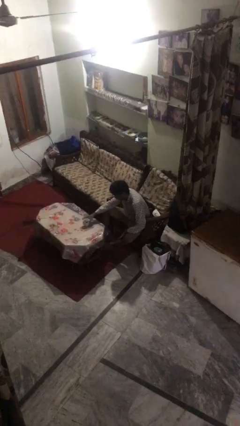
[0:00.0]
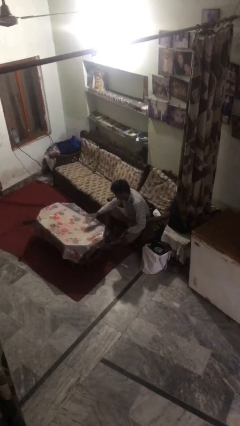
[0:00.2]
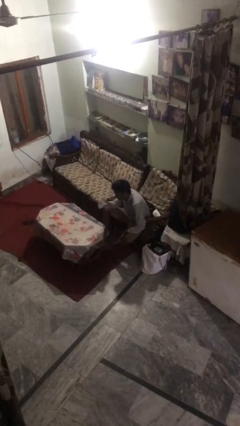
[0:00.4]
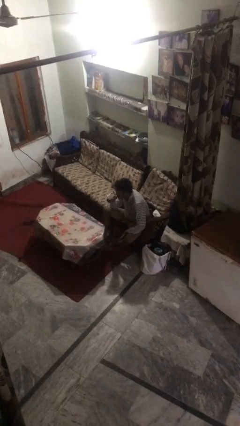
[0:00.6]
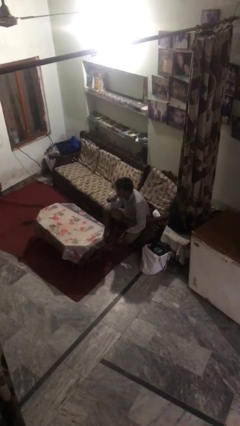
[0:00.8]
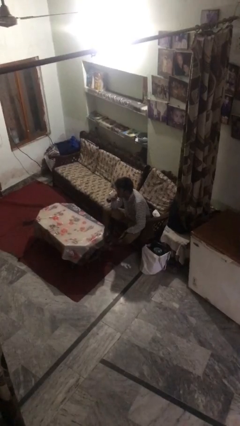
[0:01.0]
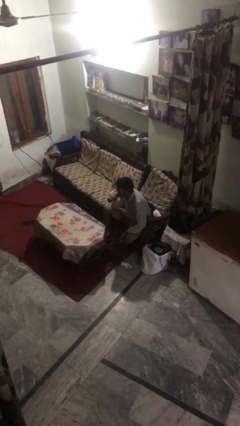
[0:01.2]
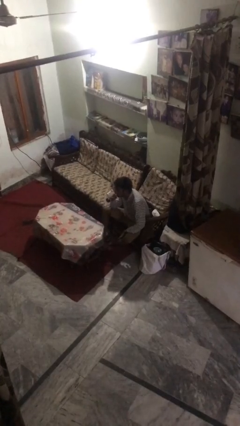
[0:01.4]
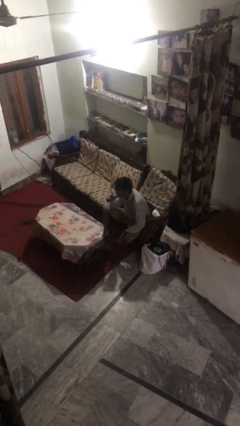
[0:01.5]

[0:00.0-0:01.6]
person drinks from mug

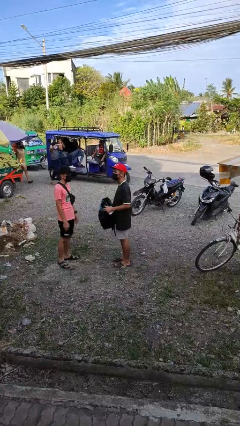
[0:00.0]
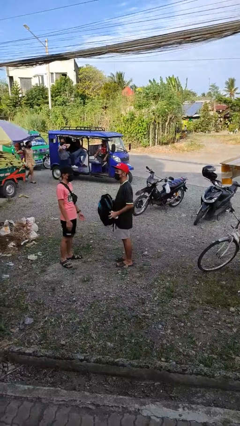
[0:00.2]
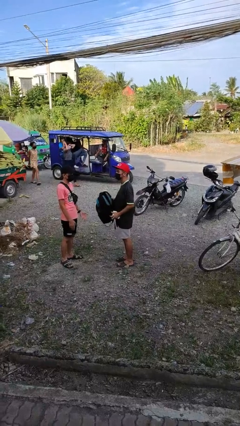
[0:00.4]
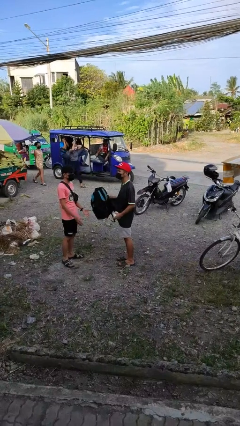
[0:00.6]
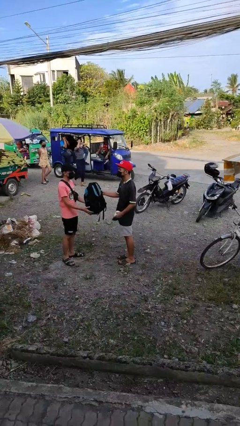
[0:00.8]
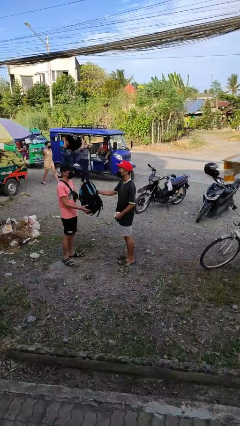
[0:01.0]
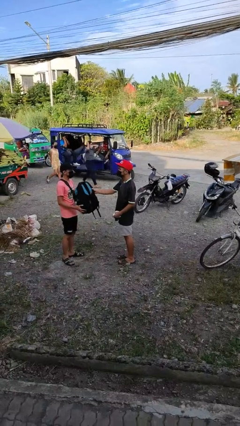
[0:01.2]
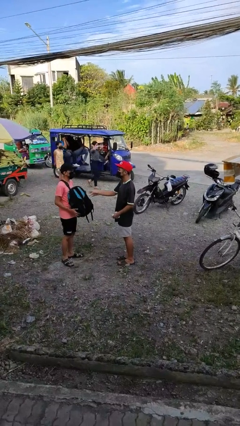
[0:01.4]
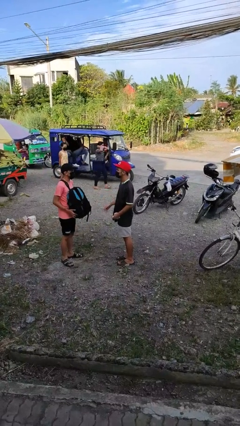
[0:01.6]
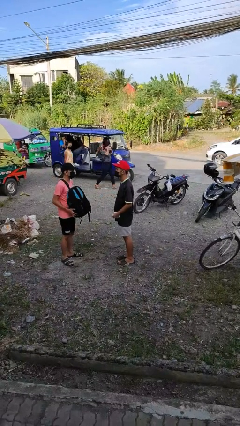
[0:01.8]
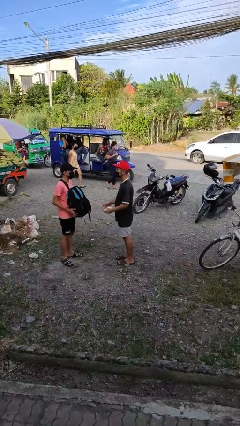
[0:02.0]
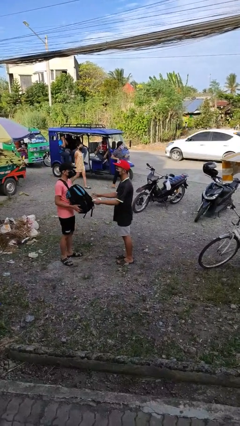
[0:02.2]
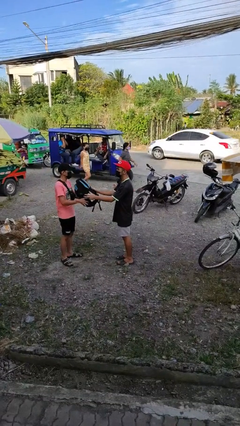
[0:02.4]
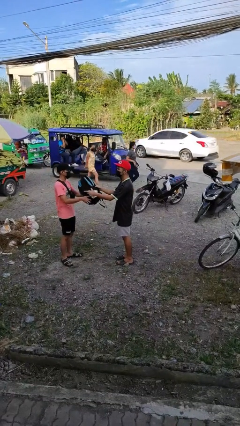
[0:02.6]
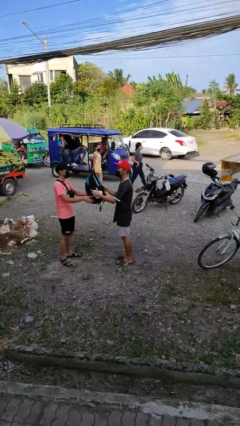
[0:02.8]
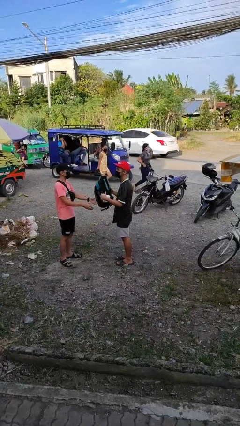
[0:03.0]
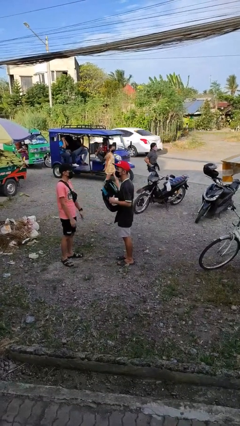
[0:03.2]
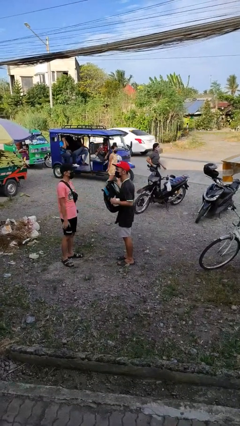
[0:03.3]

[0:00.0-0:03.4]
person transfers object to person

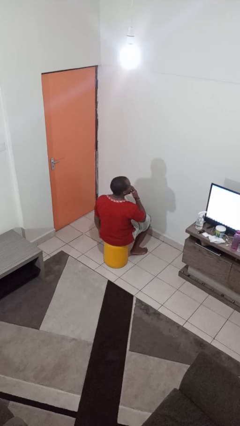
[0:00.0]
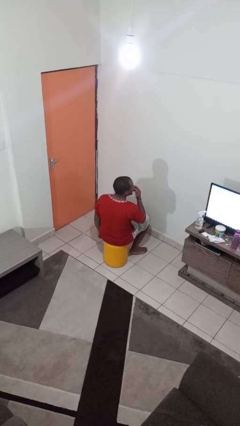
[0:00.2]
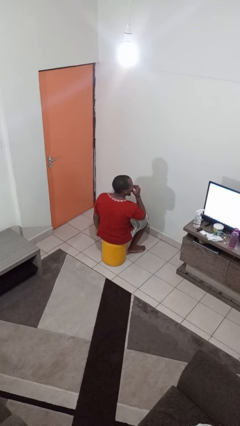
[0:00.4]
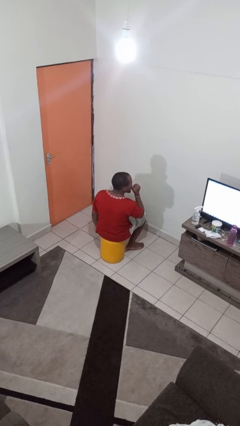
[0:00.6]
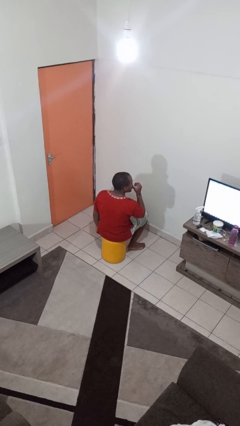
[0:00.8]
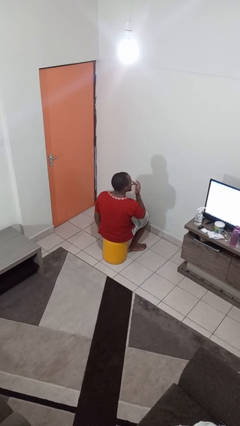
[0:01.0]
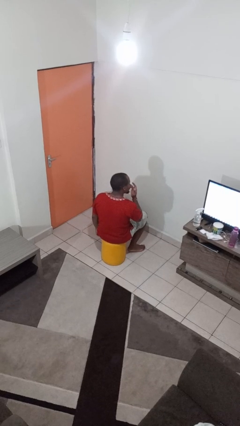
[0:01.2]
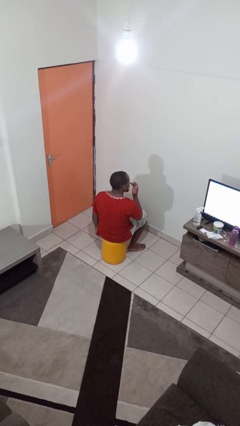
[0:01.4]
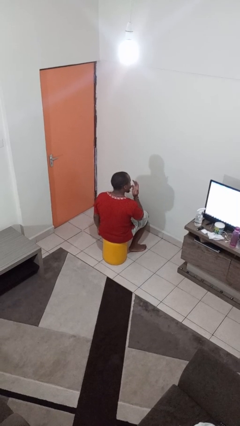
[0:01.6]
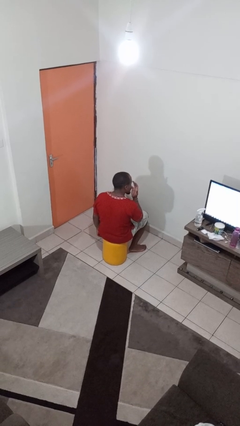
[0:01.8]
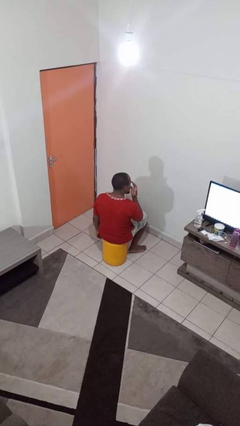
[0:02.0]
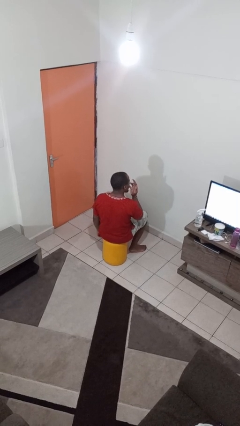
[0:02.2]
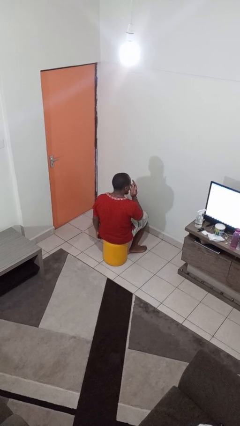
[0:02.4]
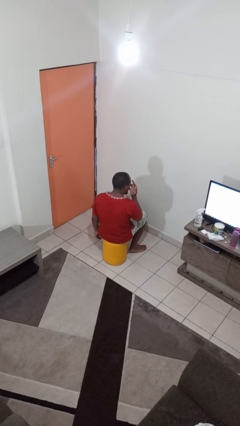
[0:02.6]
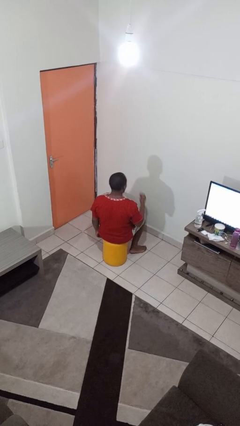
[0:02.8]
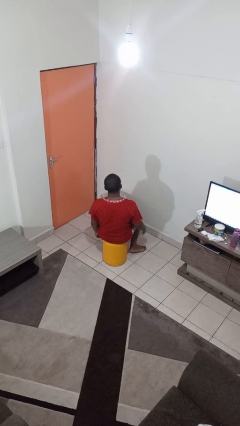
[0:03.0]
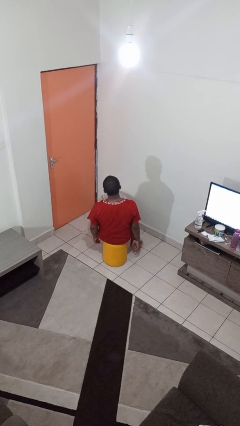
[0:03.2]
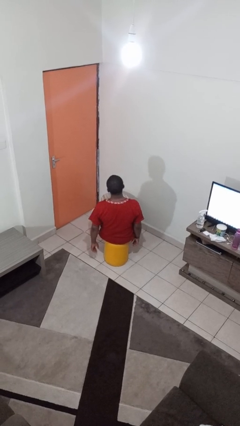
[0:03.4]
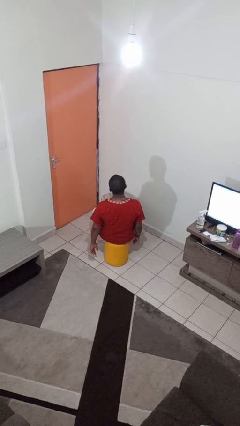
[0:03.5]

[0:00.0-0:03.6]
person licks fingers

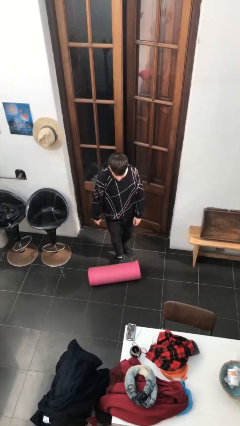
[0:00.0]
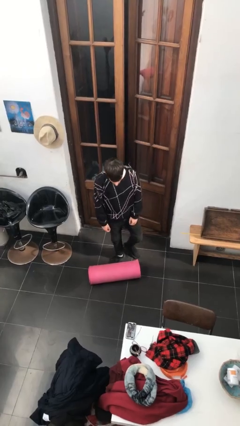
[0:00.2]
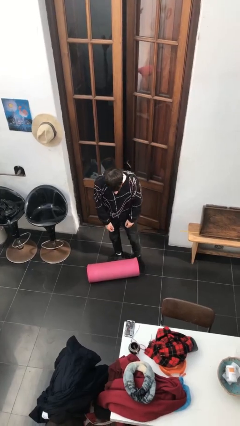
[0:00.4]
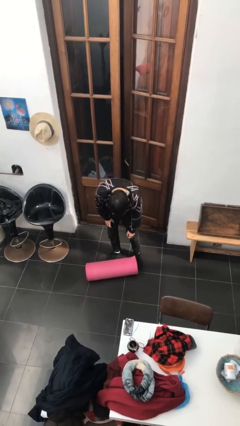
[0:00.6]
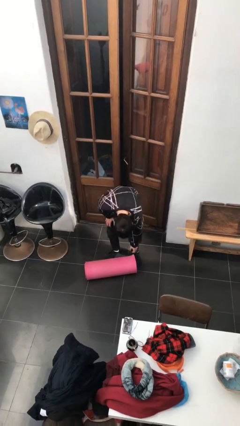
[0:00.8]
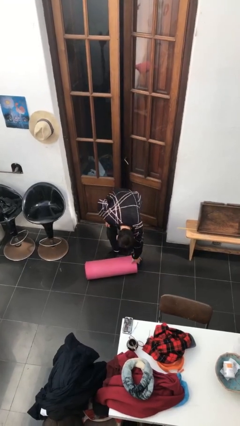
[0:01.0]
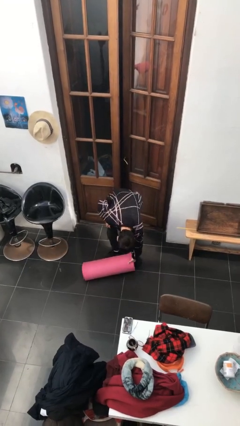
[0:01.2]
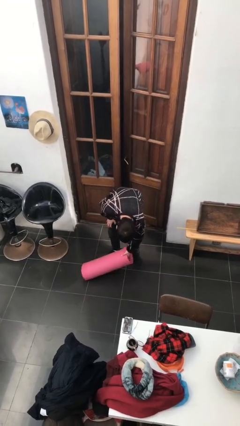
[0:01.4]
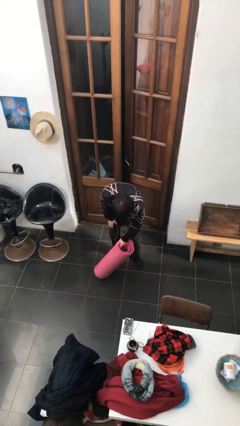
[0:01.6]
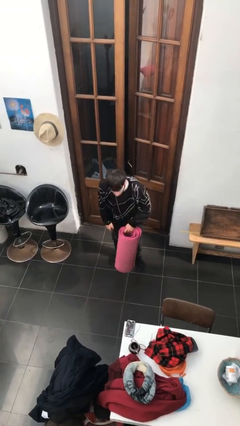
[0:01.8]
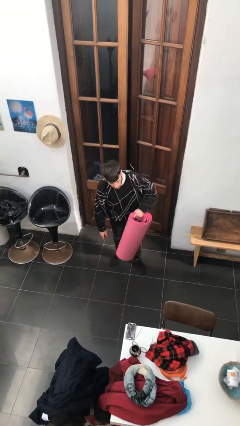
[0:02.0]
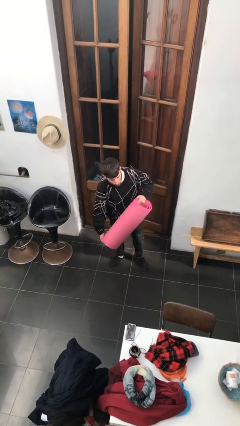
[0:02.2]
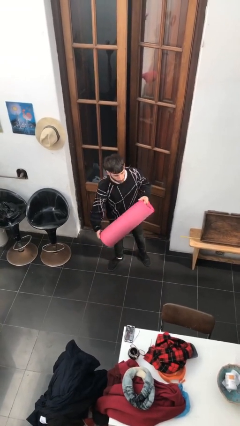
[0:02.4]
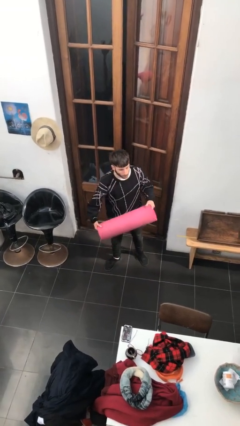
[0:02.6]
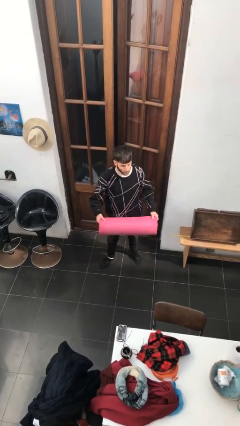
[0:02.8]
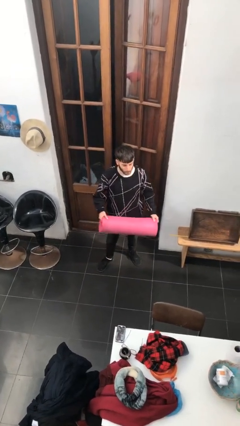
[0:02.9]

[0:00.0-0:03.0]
person picks up object from floor

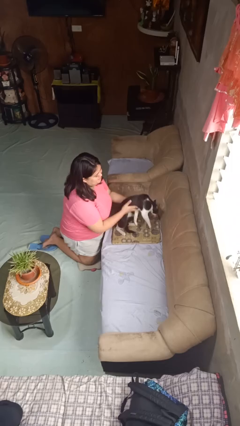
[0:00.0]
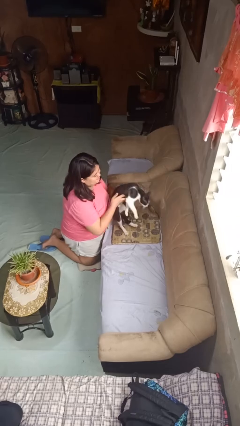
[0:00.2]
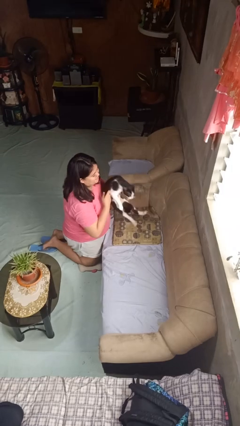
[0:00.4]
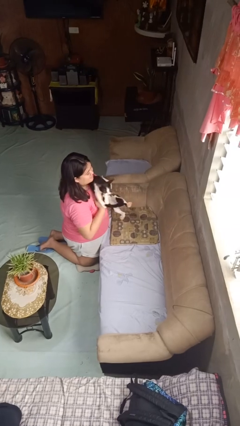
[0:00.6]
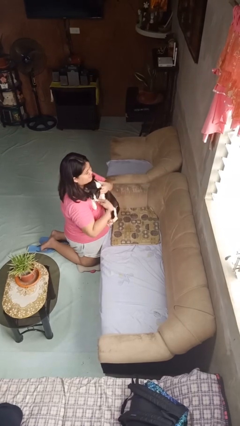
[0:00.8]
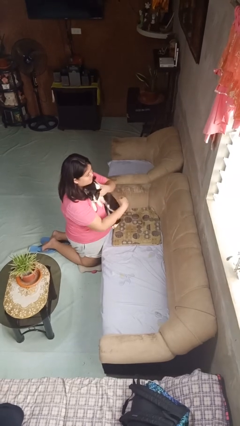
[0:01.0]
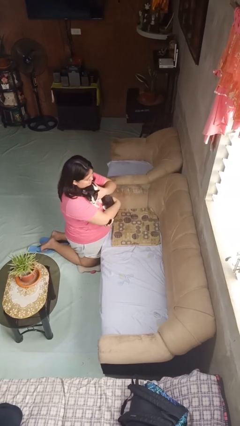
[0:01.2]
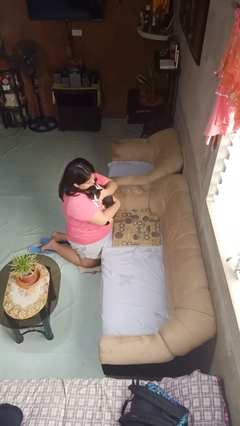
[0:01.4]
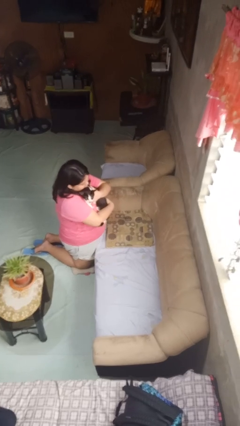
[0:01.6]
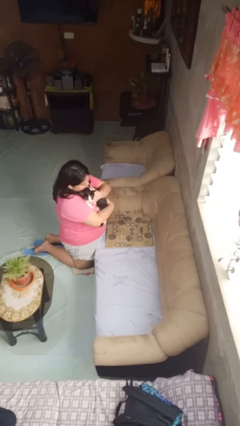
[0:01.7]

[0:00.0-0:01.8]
person hugs cat

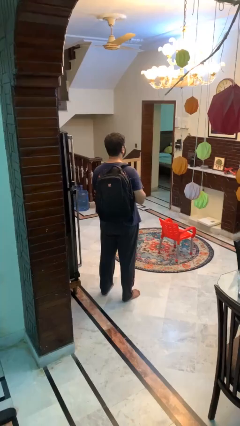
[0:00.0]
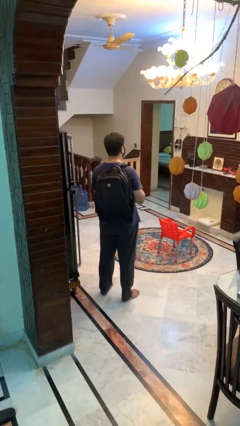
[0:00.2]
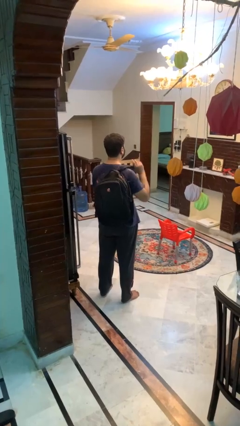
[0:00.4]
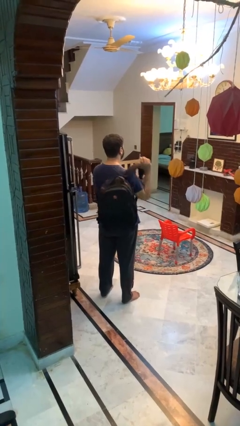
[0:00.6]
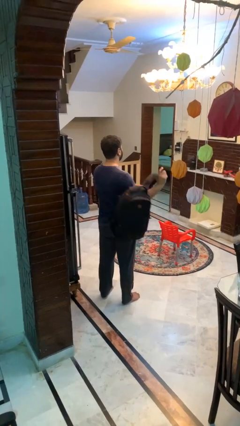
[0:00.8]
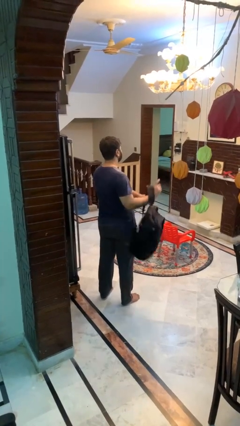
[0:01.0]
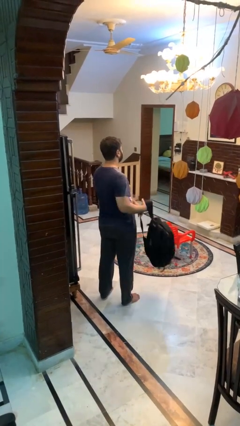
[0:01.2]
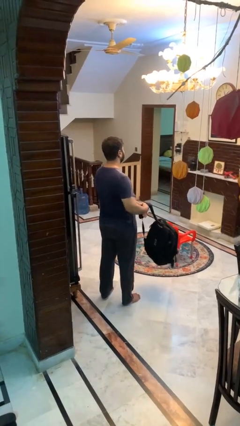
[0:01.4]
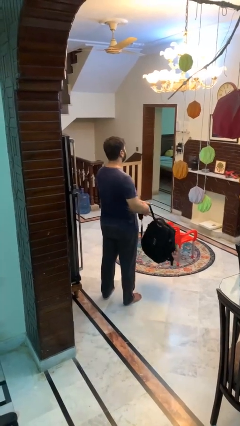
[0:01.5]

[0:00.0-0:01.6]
person takes off backpack

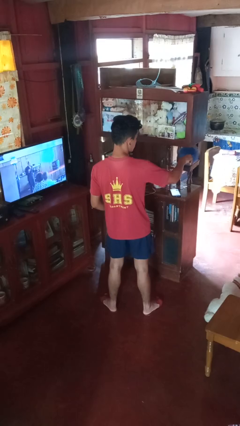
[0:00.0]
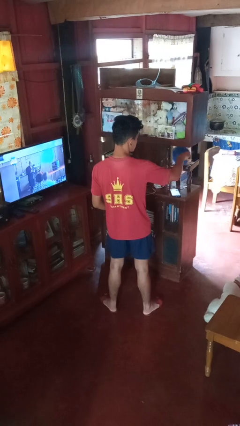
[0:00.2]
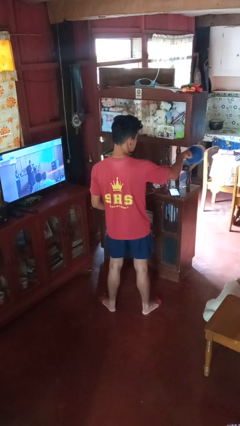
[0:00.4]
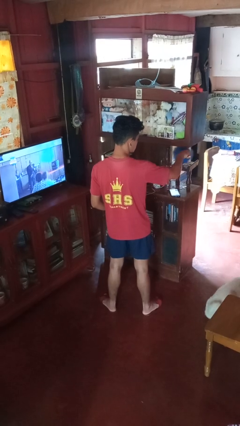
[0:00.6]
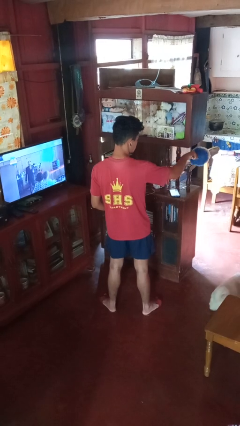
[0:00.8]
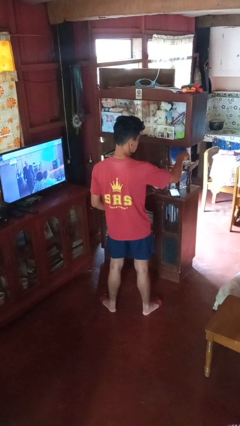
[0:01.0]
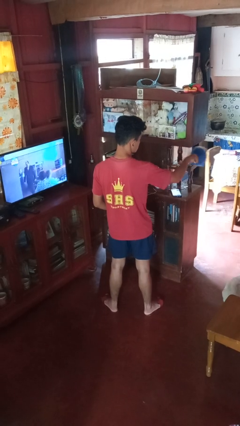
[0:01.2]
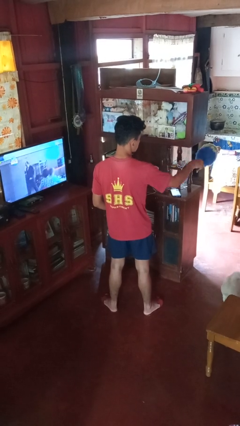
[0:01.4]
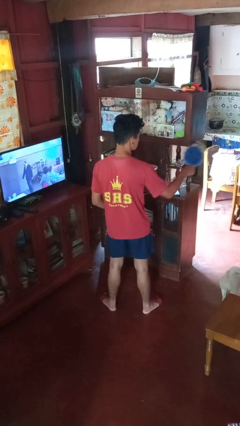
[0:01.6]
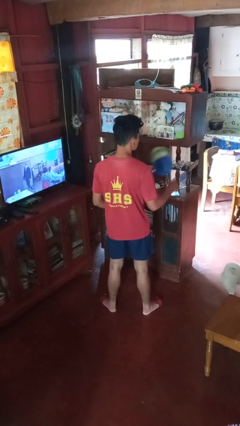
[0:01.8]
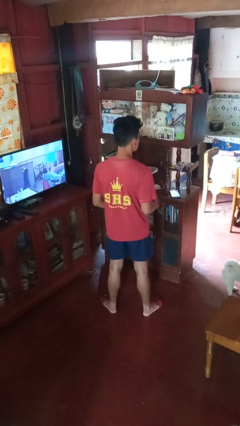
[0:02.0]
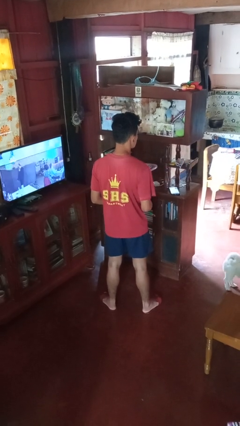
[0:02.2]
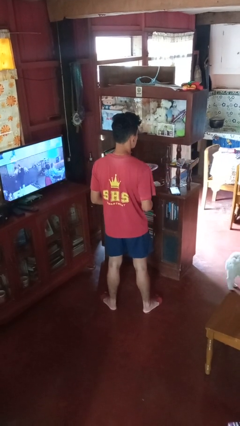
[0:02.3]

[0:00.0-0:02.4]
person dusts furniture
